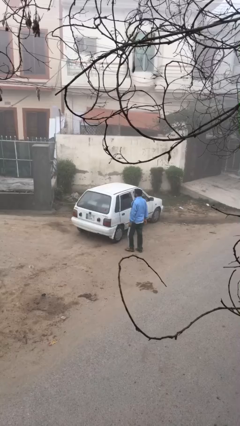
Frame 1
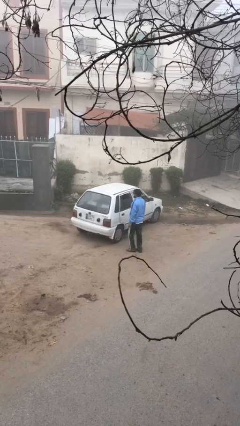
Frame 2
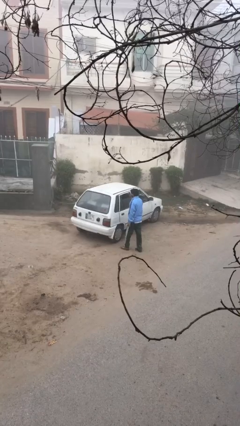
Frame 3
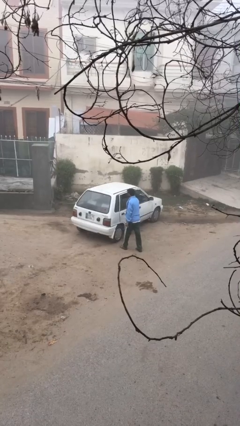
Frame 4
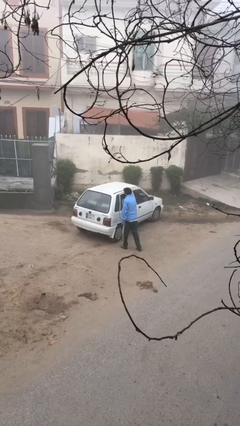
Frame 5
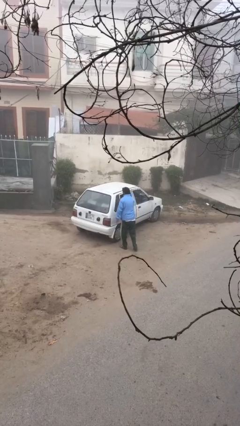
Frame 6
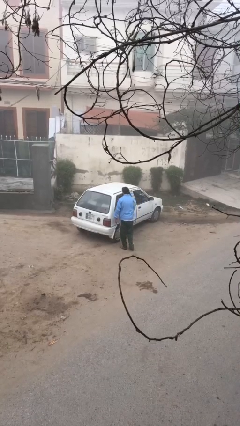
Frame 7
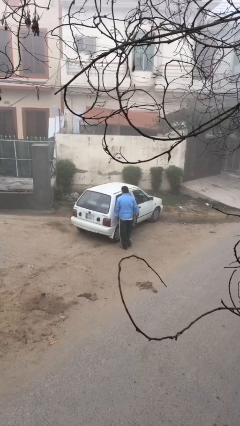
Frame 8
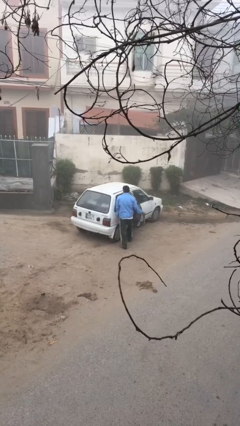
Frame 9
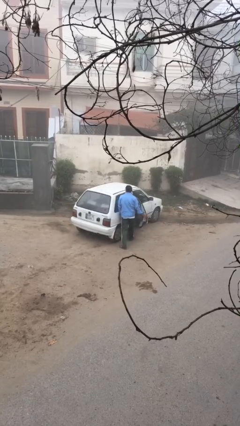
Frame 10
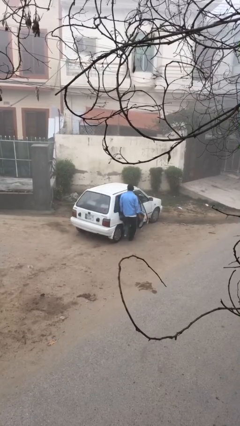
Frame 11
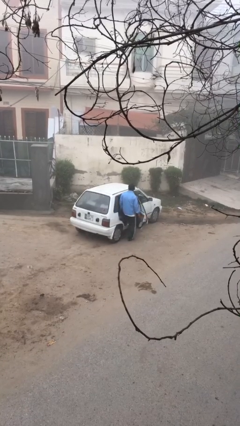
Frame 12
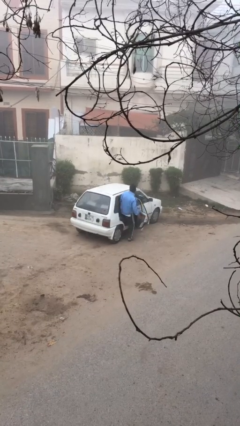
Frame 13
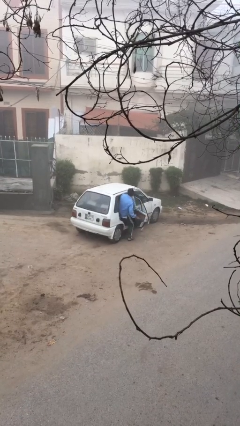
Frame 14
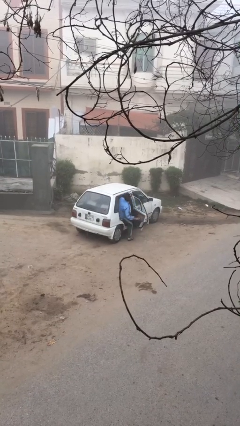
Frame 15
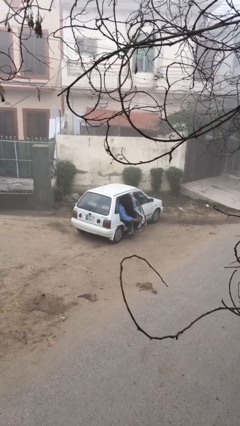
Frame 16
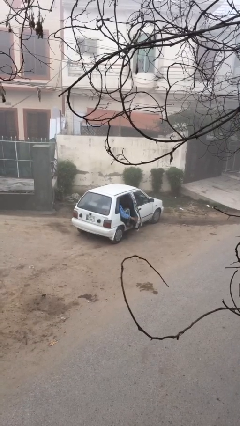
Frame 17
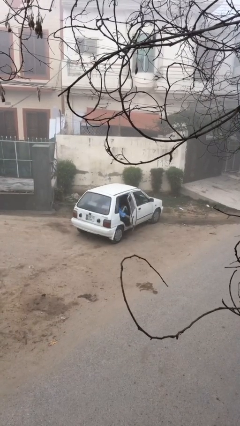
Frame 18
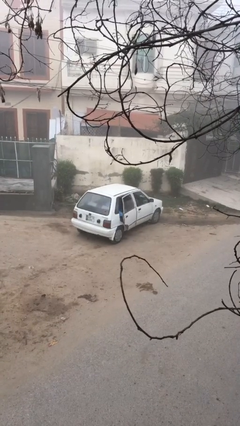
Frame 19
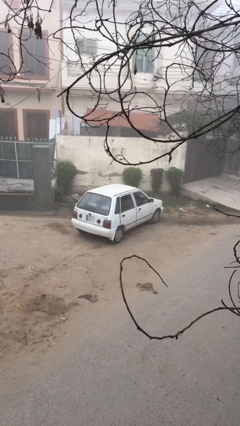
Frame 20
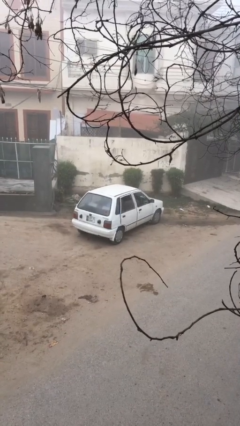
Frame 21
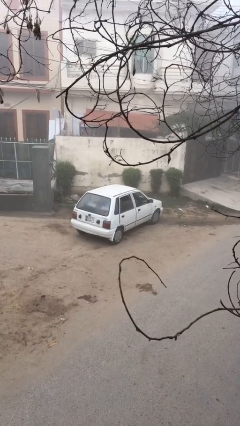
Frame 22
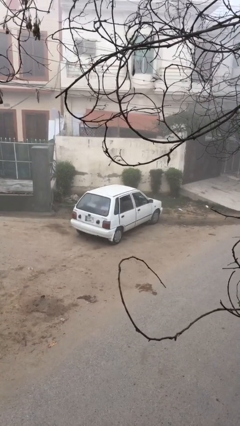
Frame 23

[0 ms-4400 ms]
car picks up person

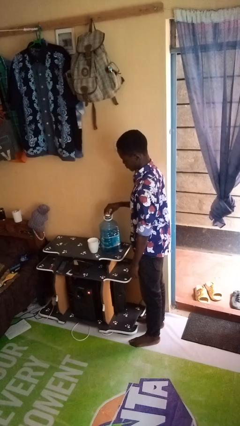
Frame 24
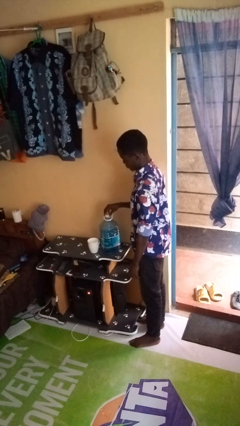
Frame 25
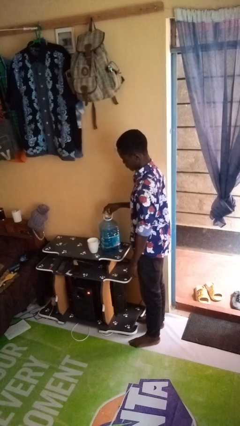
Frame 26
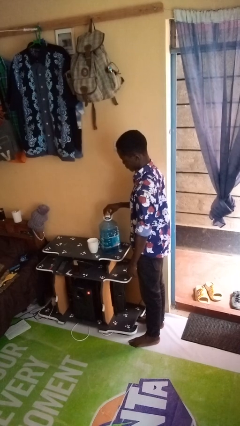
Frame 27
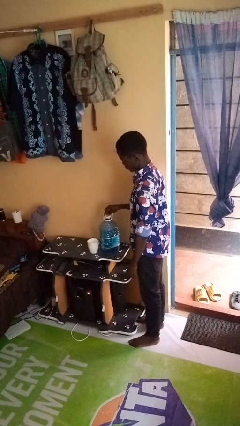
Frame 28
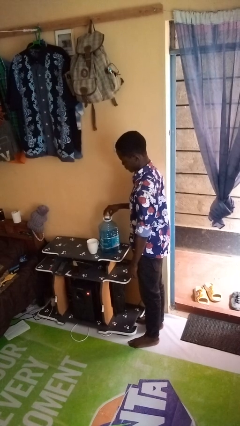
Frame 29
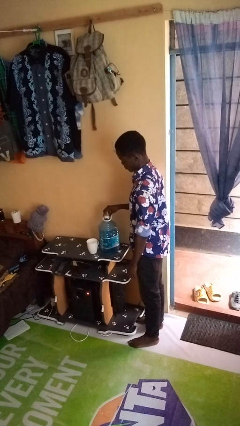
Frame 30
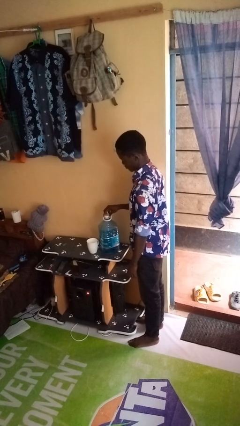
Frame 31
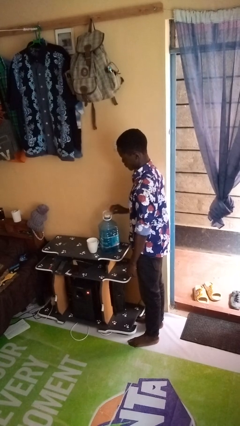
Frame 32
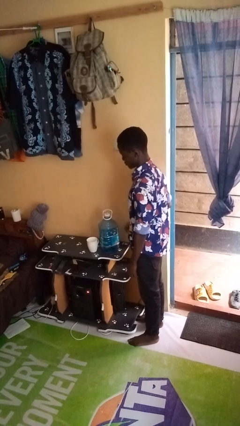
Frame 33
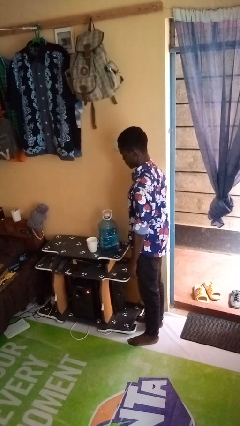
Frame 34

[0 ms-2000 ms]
person screws lid to bottle

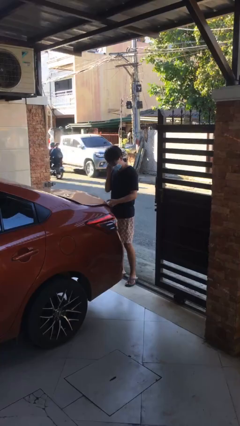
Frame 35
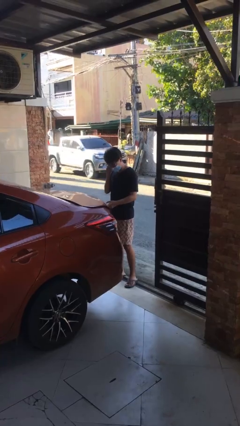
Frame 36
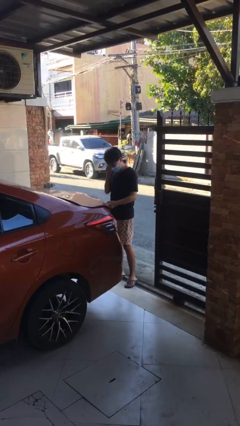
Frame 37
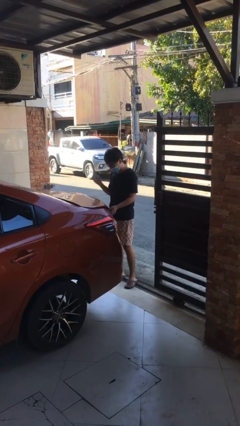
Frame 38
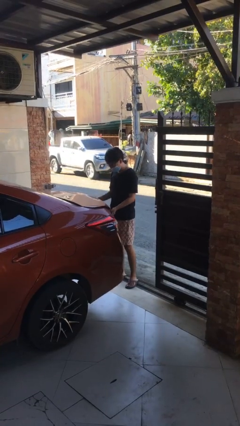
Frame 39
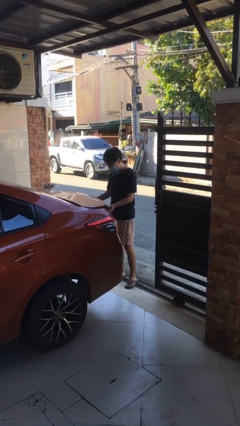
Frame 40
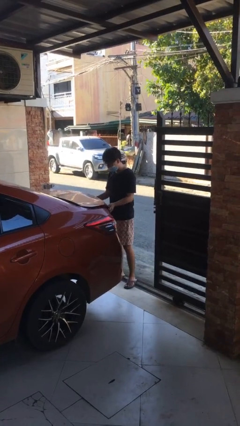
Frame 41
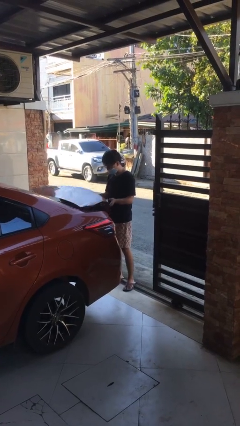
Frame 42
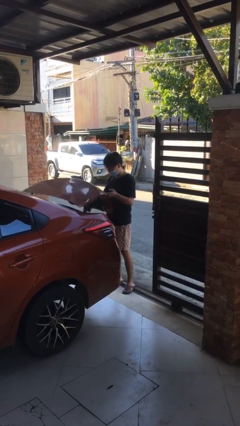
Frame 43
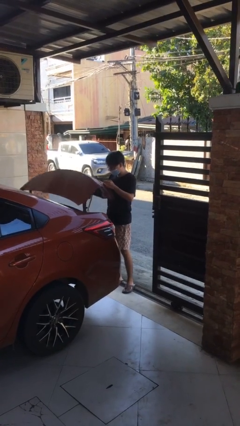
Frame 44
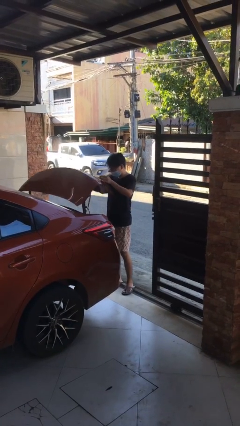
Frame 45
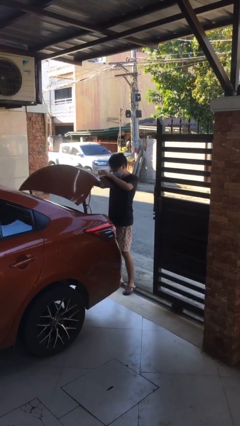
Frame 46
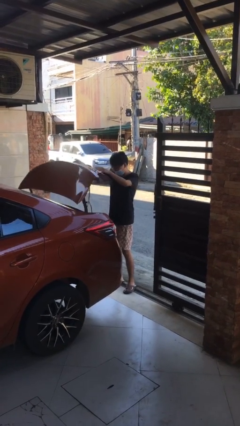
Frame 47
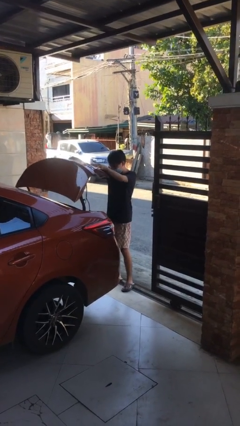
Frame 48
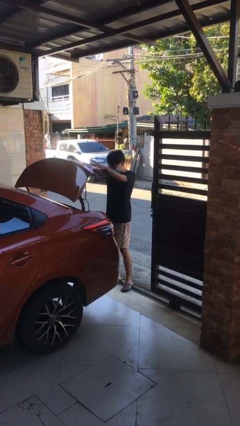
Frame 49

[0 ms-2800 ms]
person opens car trunk

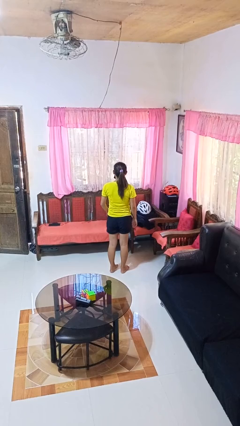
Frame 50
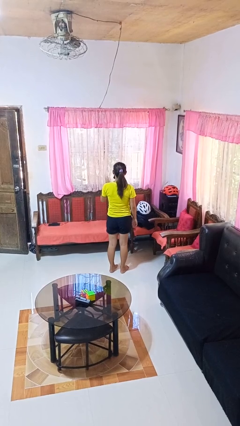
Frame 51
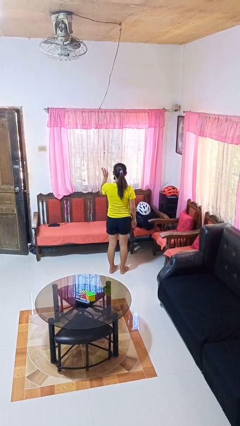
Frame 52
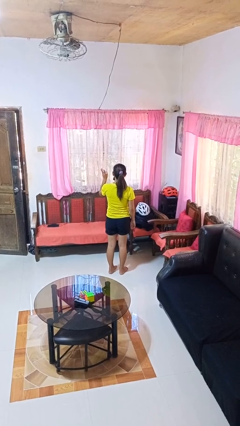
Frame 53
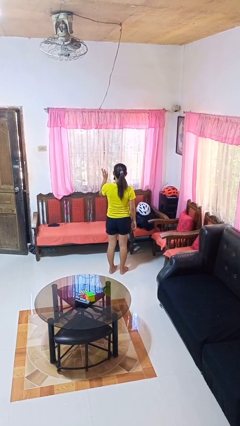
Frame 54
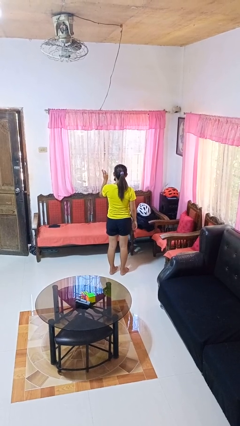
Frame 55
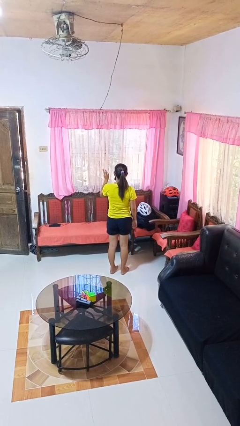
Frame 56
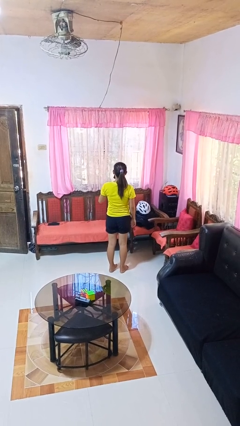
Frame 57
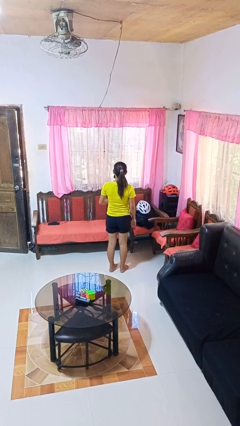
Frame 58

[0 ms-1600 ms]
person gestures number three

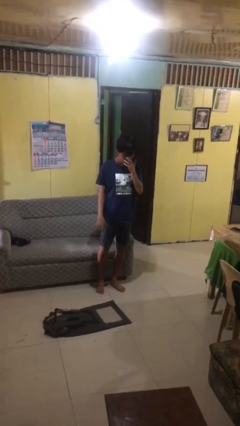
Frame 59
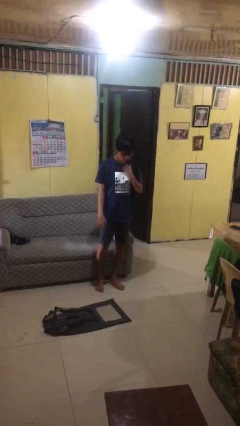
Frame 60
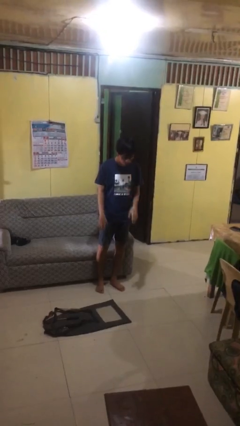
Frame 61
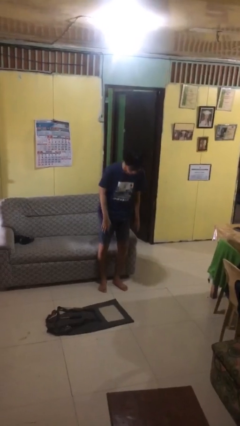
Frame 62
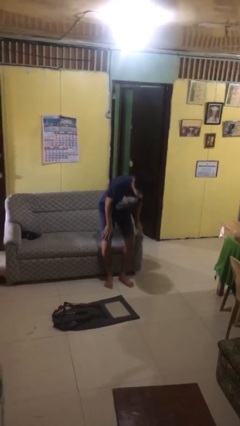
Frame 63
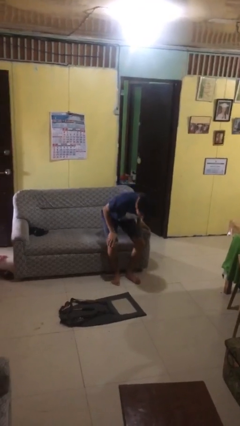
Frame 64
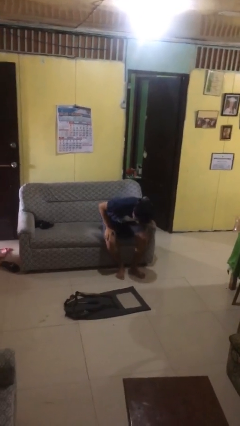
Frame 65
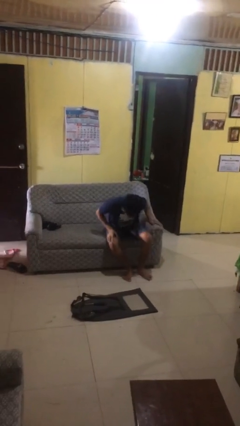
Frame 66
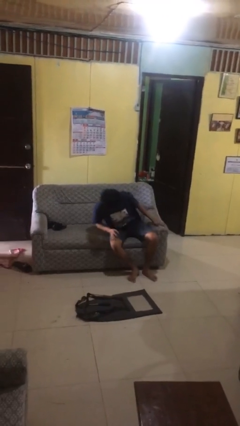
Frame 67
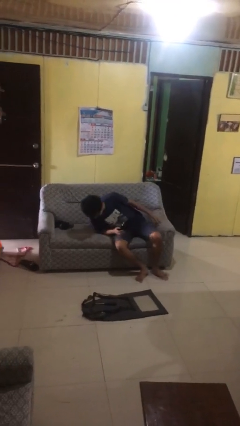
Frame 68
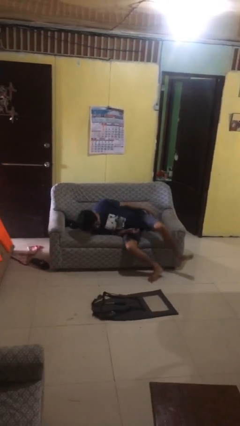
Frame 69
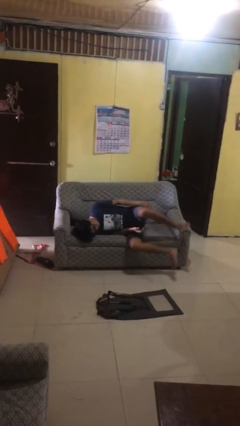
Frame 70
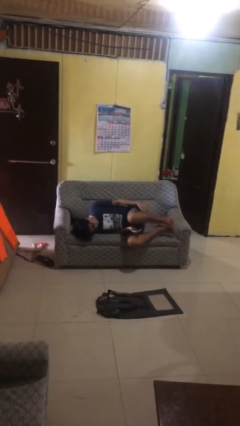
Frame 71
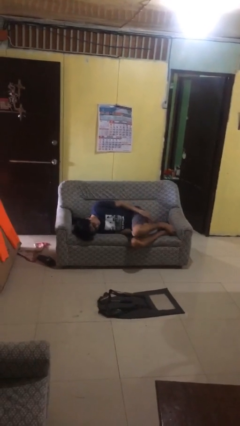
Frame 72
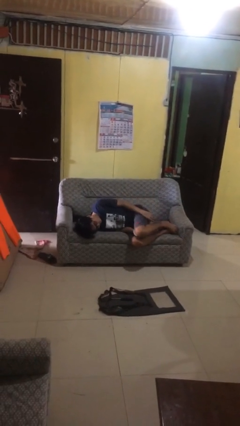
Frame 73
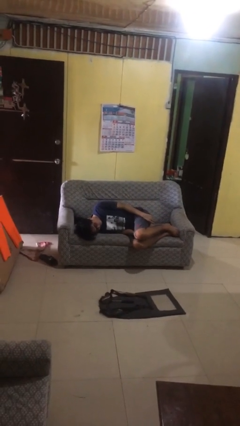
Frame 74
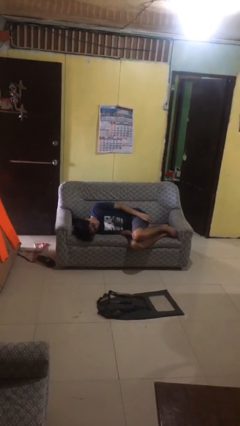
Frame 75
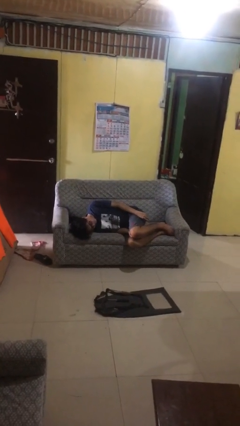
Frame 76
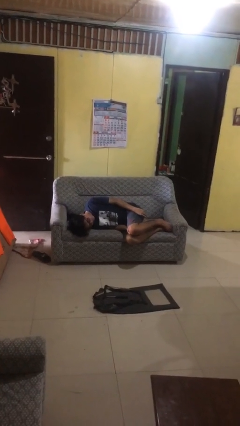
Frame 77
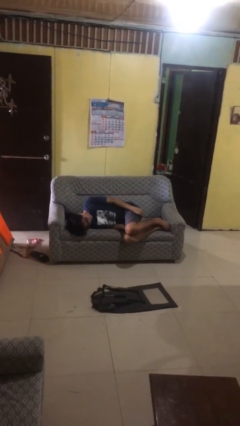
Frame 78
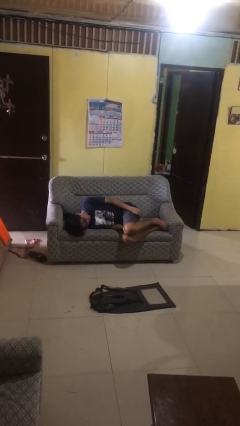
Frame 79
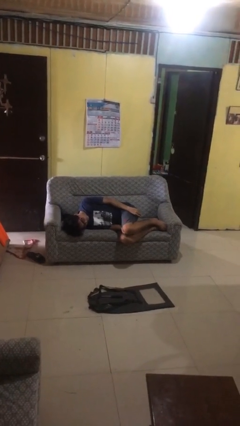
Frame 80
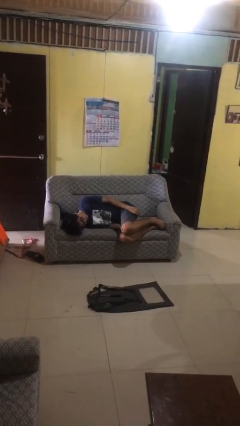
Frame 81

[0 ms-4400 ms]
person lies down on couch

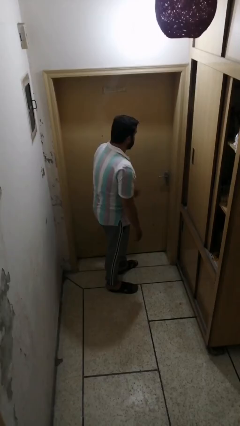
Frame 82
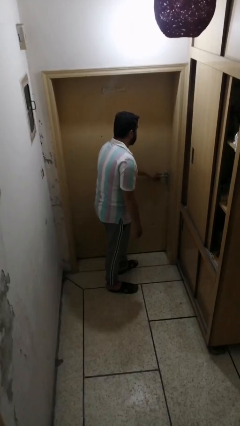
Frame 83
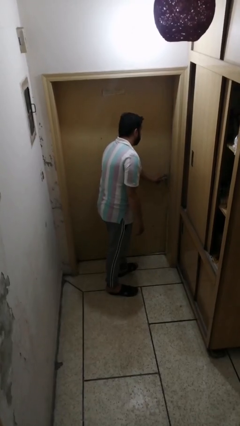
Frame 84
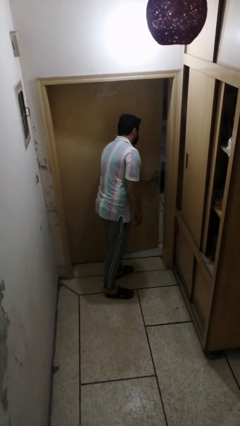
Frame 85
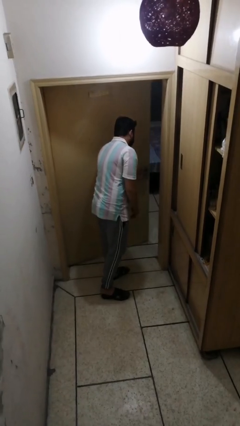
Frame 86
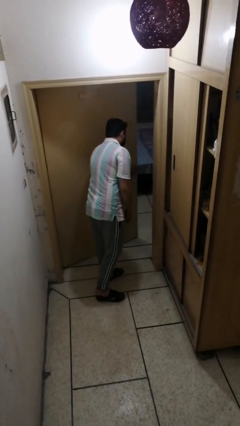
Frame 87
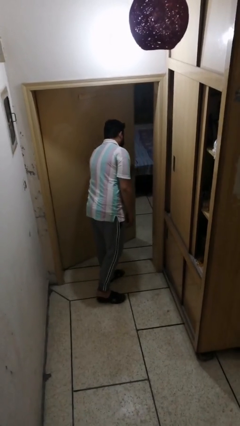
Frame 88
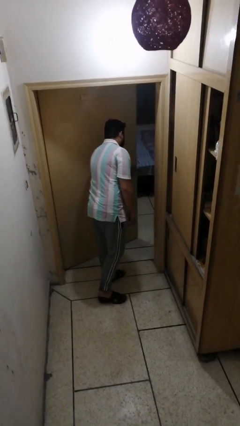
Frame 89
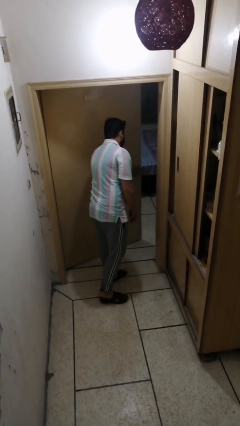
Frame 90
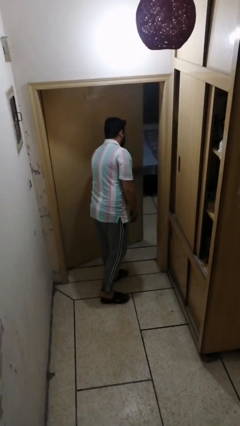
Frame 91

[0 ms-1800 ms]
person opens facility door

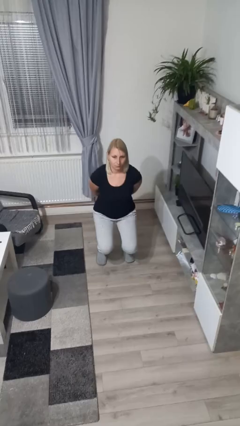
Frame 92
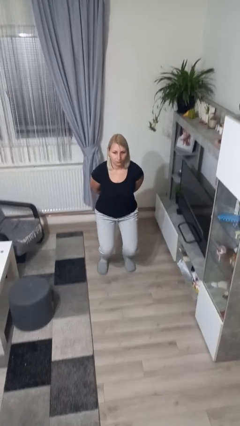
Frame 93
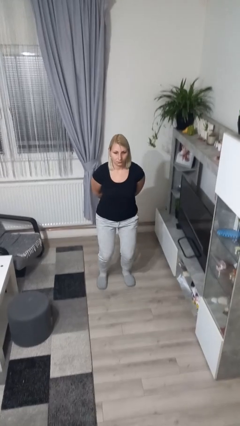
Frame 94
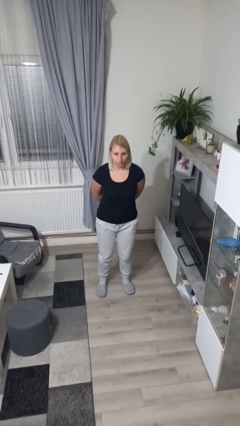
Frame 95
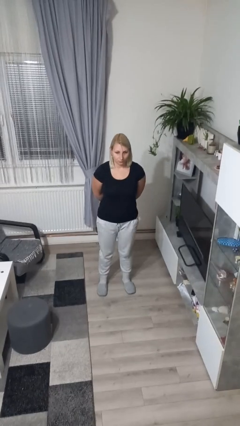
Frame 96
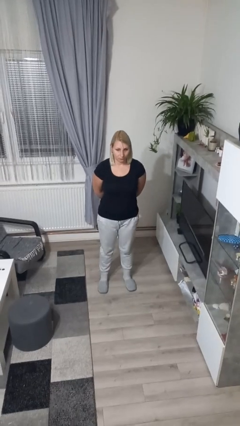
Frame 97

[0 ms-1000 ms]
person stands up
